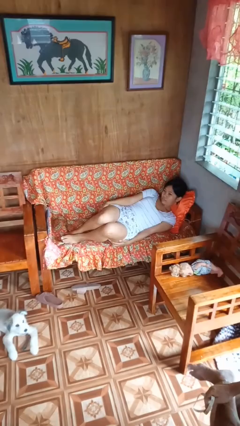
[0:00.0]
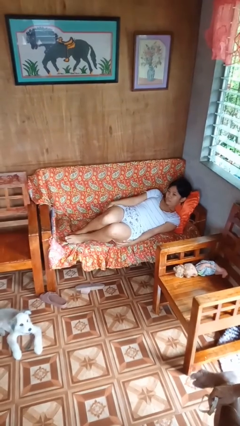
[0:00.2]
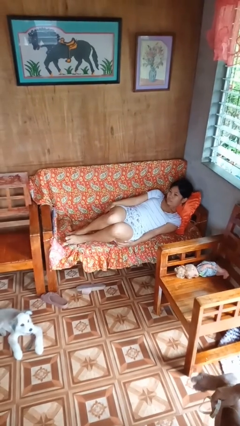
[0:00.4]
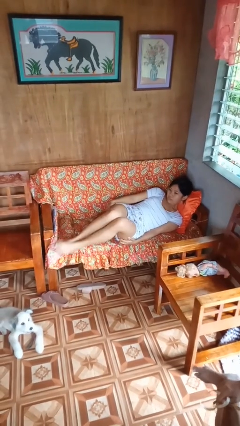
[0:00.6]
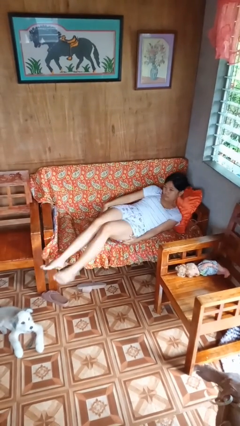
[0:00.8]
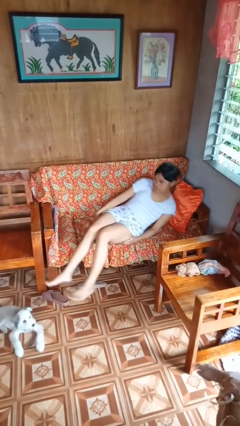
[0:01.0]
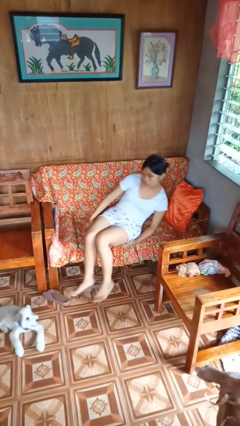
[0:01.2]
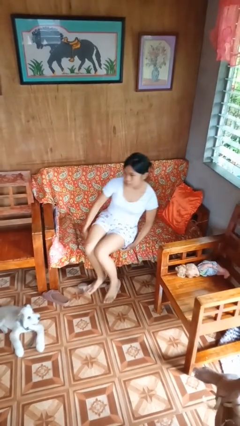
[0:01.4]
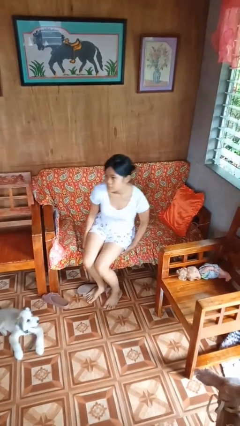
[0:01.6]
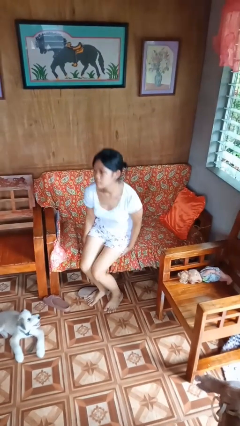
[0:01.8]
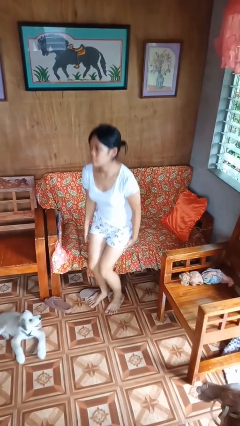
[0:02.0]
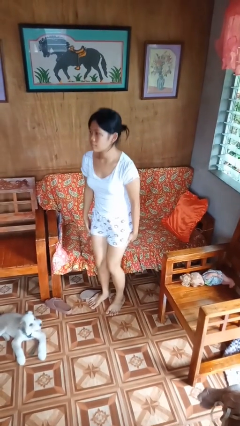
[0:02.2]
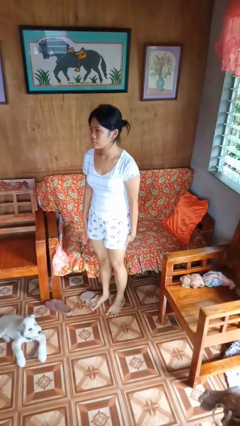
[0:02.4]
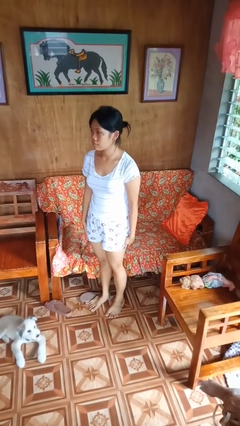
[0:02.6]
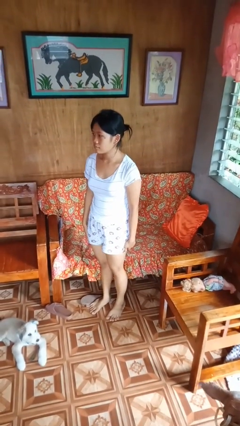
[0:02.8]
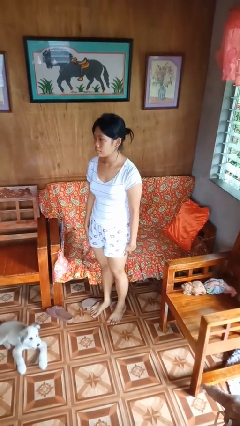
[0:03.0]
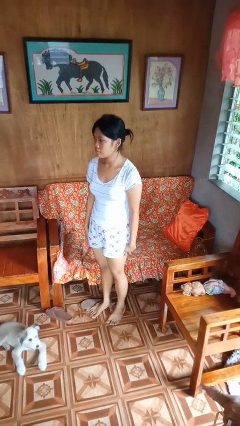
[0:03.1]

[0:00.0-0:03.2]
person stands up

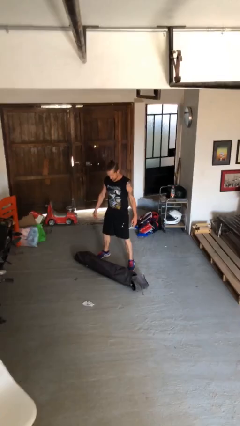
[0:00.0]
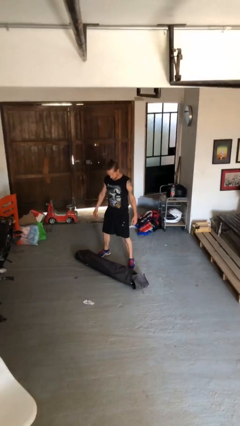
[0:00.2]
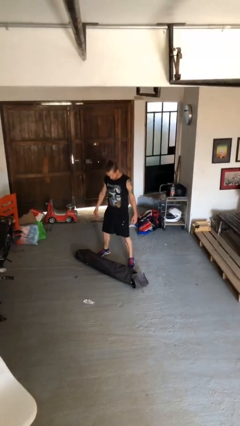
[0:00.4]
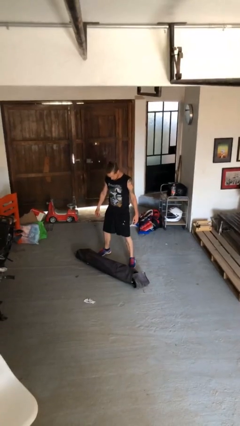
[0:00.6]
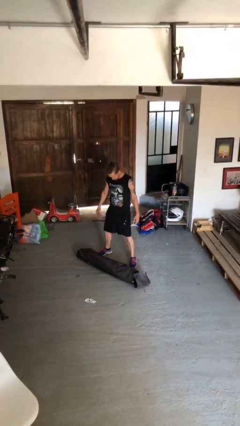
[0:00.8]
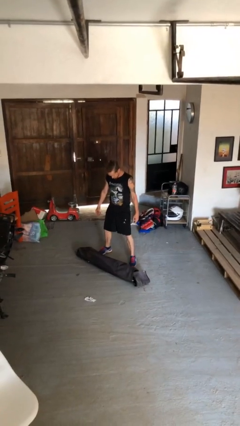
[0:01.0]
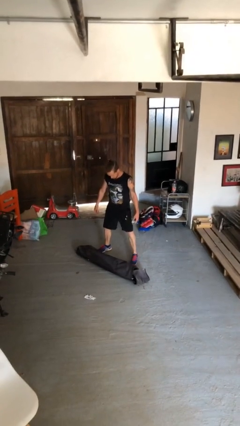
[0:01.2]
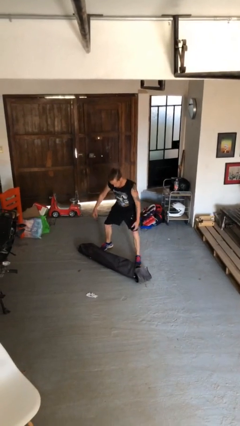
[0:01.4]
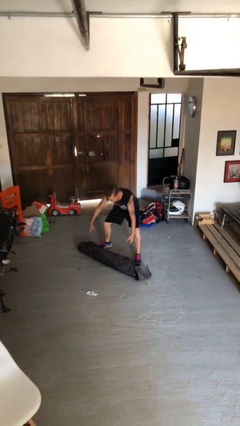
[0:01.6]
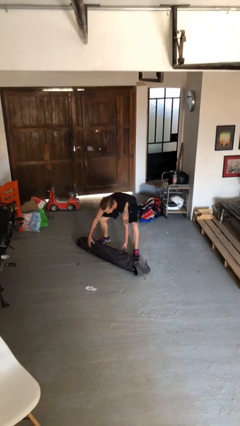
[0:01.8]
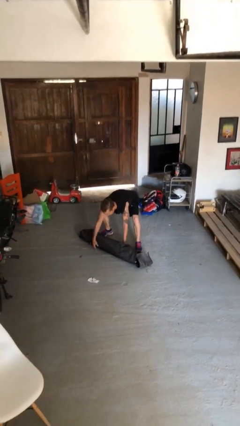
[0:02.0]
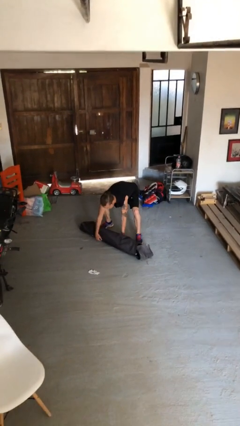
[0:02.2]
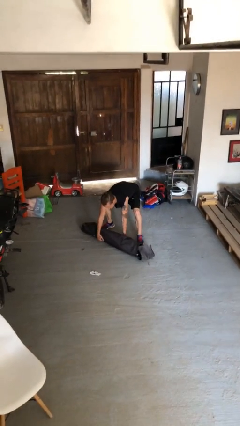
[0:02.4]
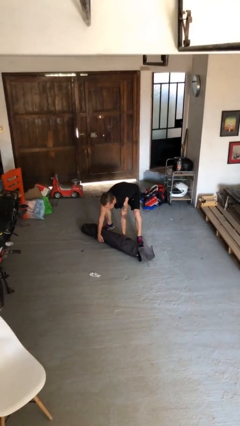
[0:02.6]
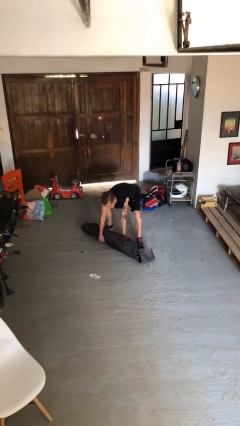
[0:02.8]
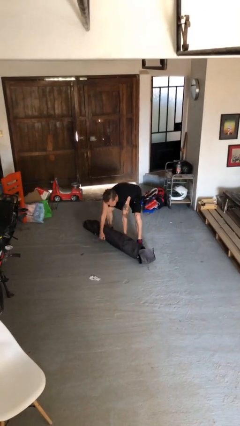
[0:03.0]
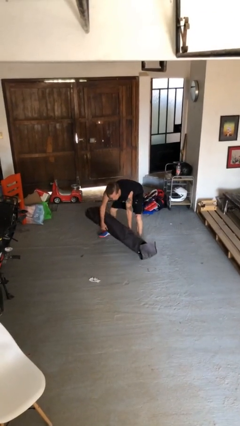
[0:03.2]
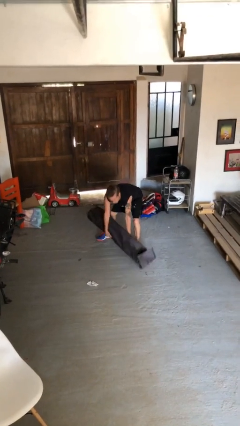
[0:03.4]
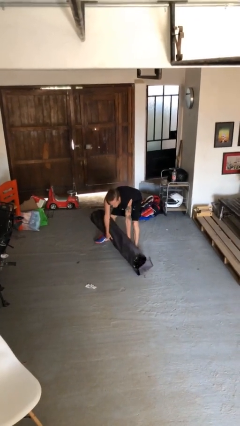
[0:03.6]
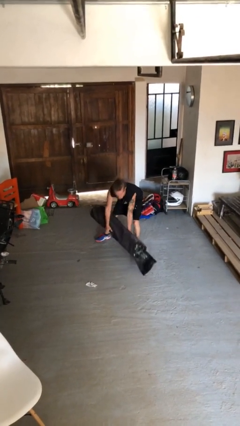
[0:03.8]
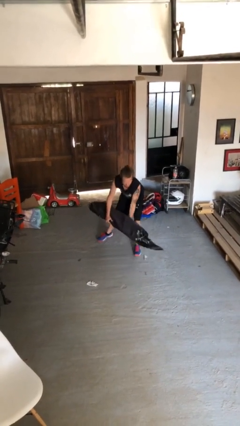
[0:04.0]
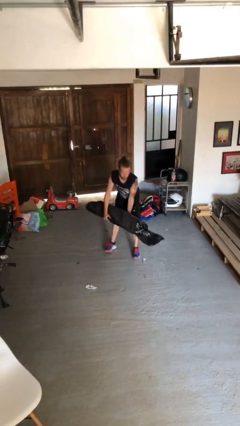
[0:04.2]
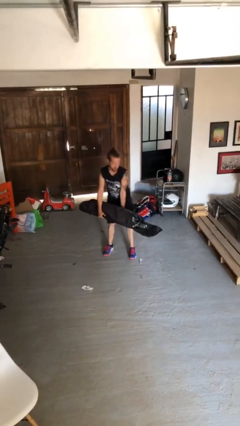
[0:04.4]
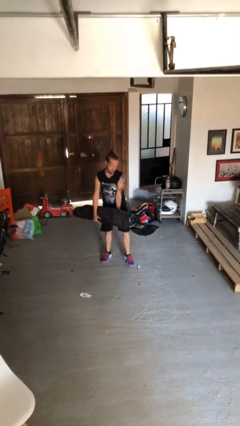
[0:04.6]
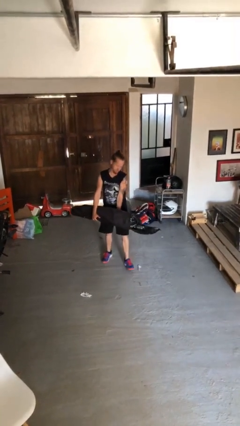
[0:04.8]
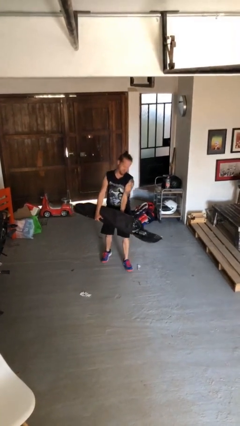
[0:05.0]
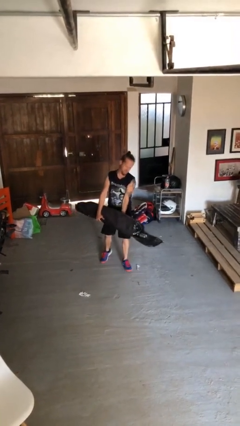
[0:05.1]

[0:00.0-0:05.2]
person picks up object from floor

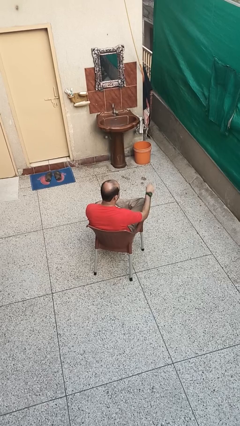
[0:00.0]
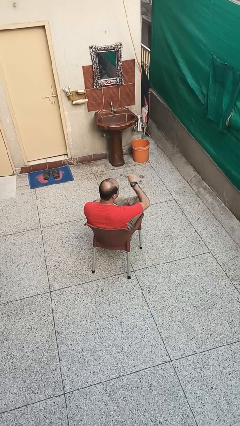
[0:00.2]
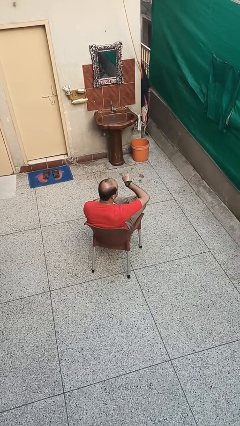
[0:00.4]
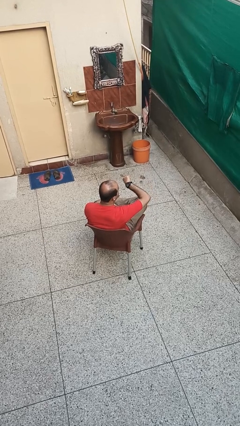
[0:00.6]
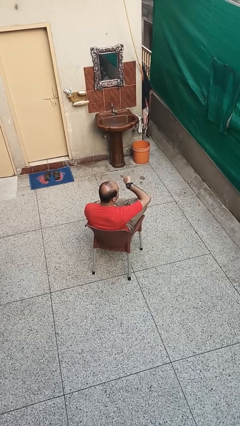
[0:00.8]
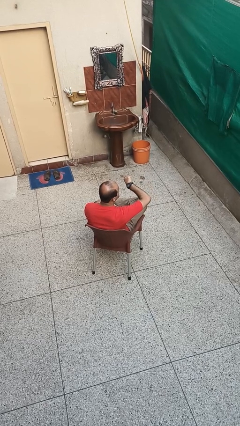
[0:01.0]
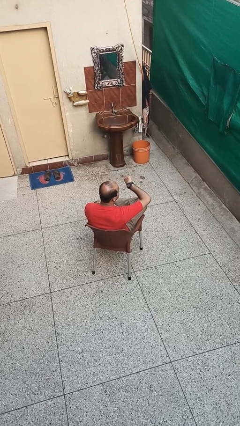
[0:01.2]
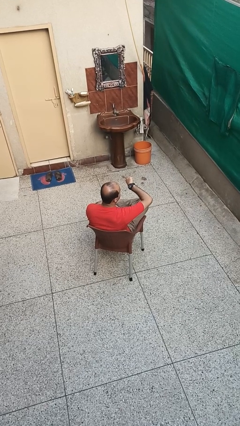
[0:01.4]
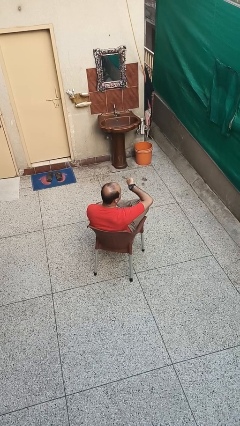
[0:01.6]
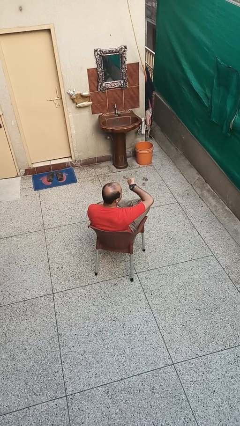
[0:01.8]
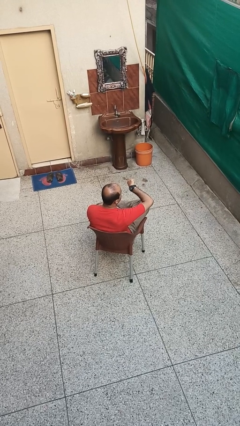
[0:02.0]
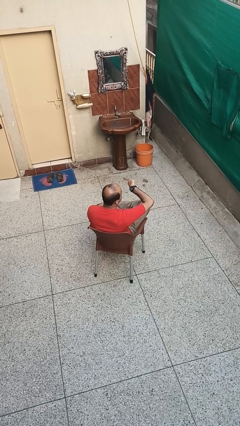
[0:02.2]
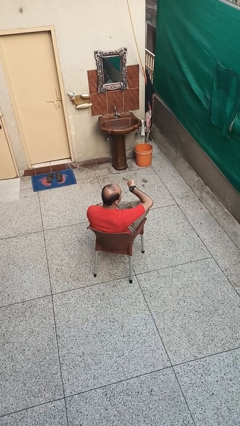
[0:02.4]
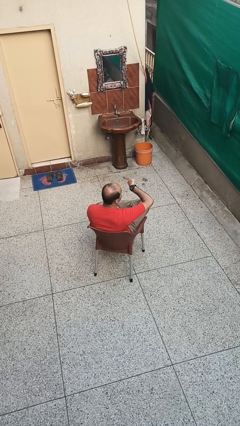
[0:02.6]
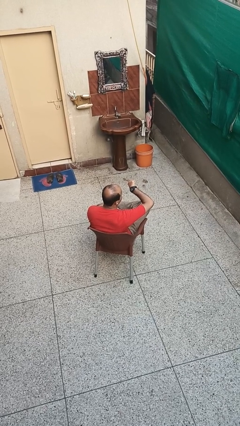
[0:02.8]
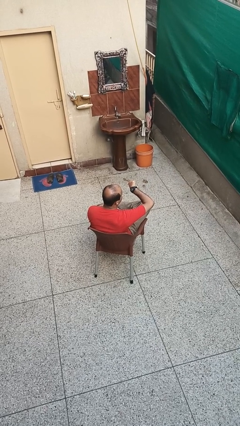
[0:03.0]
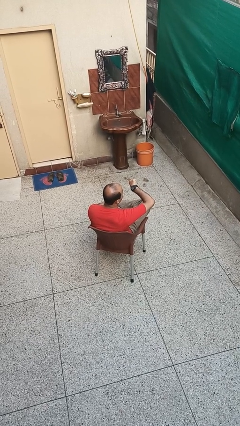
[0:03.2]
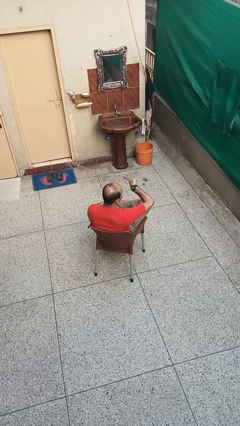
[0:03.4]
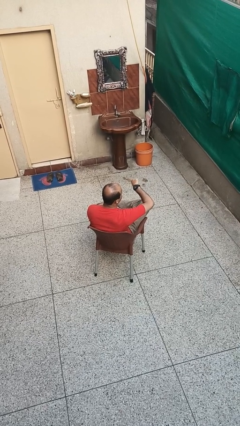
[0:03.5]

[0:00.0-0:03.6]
person looks at wristwatch

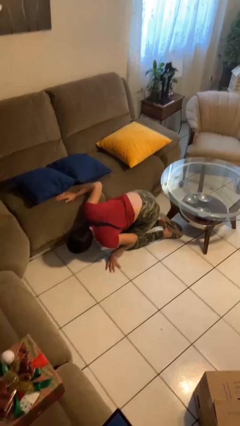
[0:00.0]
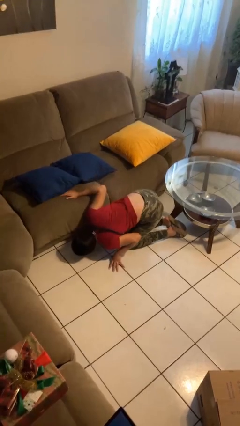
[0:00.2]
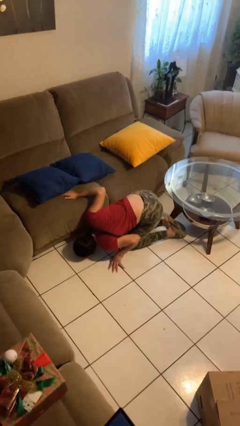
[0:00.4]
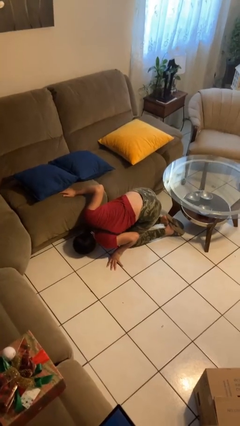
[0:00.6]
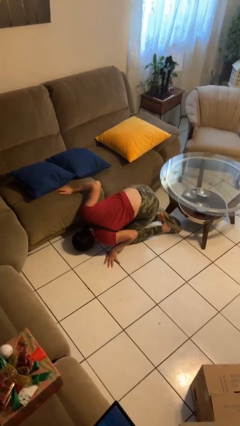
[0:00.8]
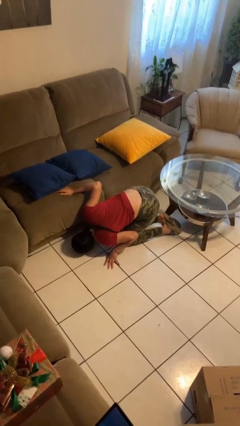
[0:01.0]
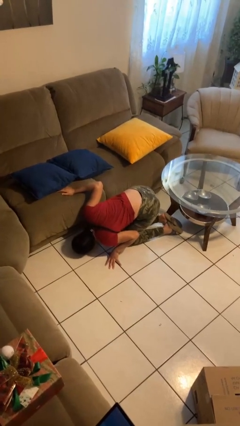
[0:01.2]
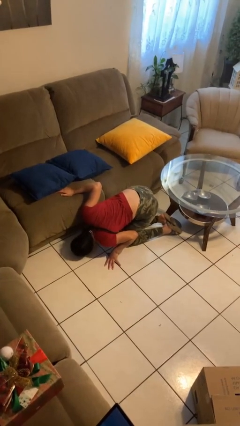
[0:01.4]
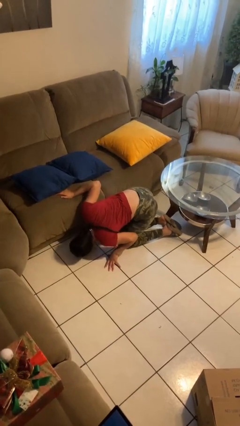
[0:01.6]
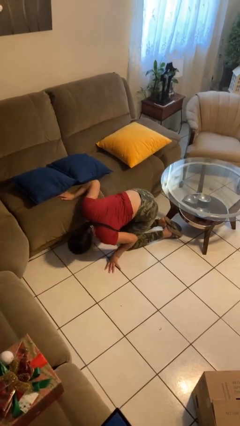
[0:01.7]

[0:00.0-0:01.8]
person searches under couch

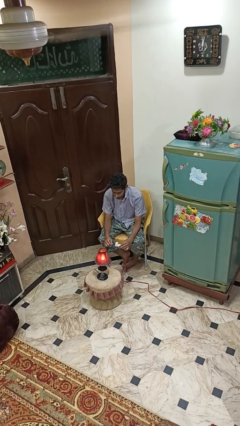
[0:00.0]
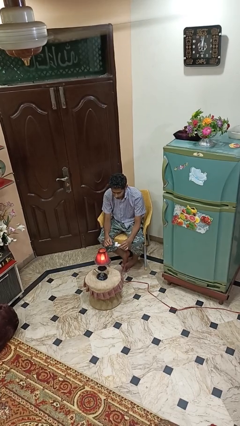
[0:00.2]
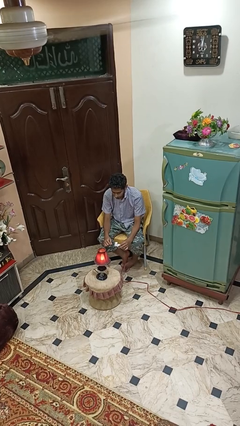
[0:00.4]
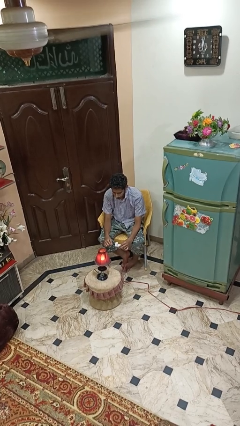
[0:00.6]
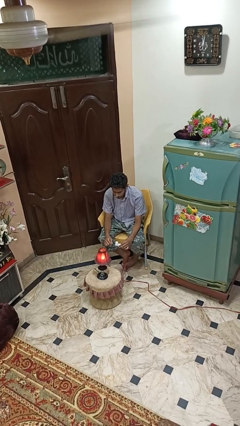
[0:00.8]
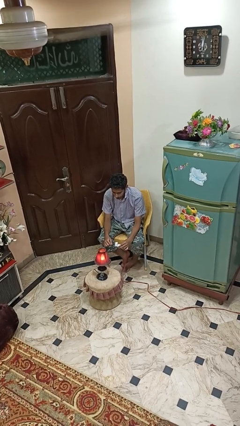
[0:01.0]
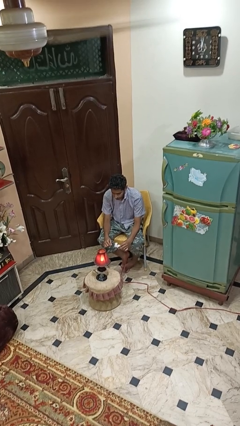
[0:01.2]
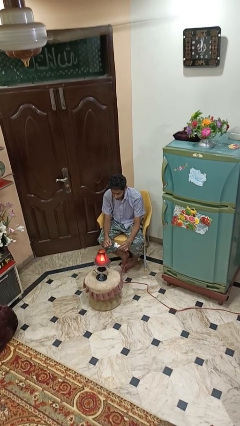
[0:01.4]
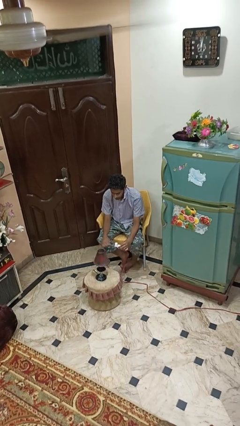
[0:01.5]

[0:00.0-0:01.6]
person turns on lamp

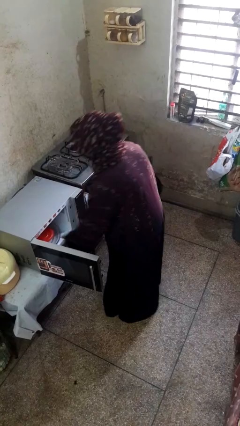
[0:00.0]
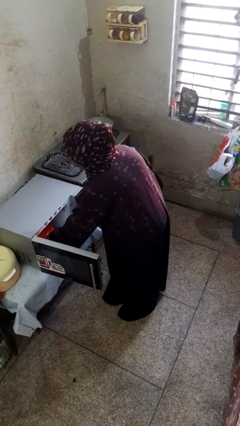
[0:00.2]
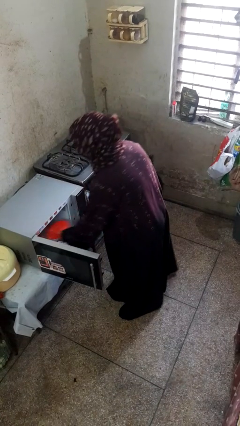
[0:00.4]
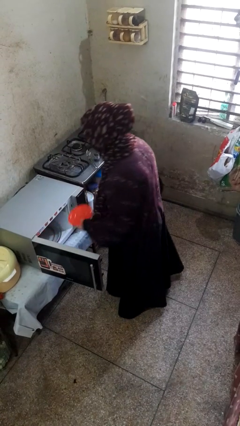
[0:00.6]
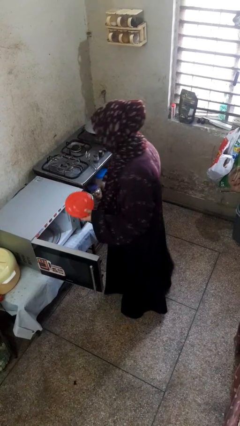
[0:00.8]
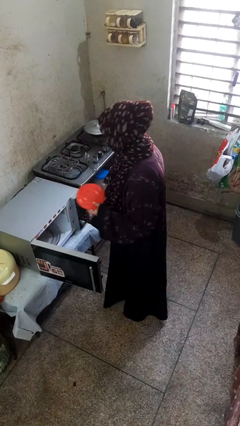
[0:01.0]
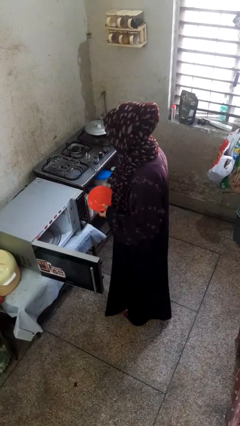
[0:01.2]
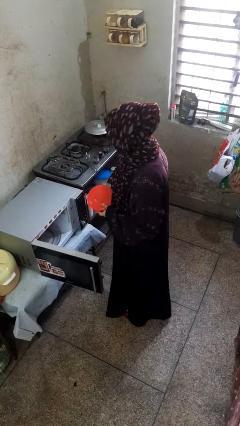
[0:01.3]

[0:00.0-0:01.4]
person takes object from microwave
